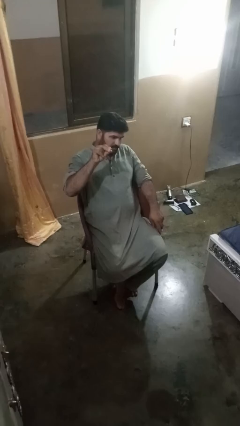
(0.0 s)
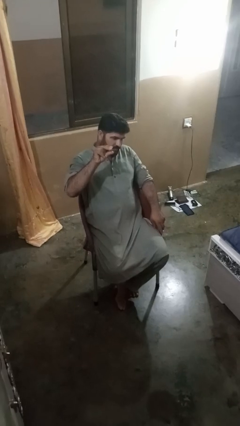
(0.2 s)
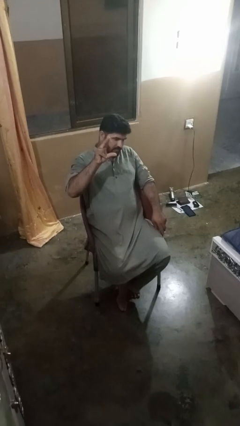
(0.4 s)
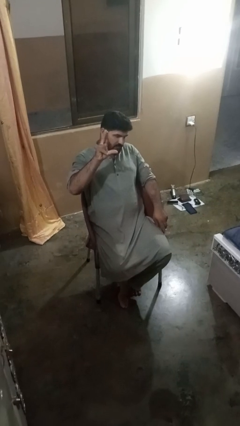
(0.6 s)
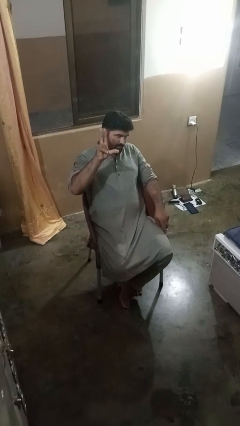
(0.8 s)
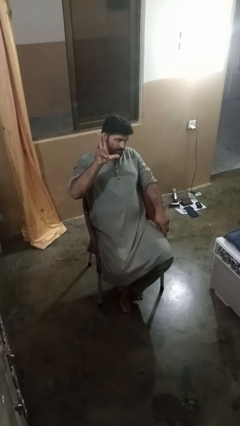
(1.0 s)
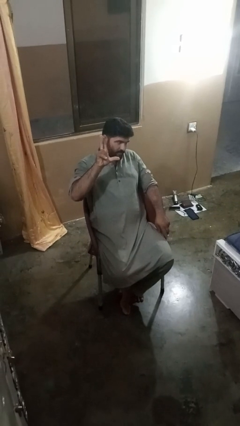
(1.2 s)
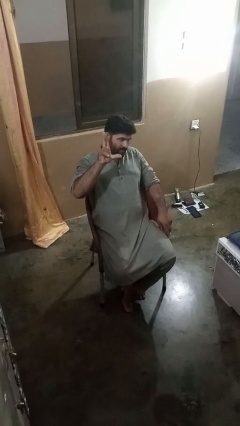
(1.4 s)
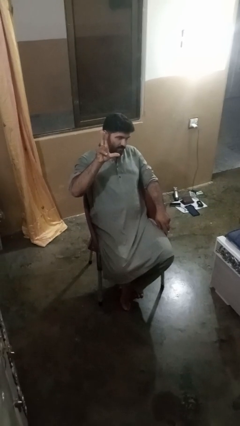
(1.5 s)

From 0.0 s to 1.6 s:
person gestures zoom out

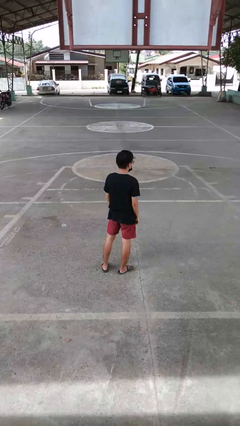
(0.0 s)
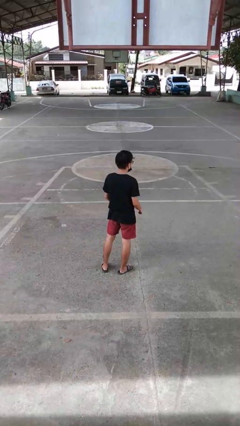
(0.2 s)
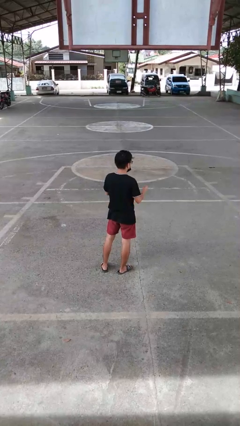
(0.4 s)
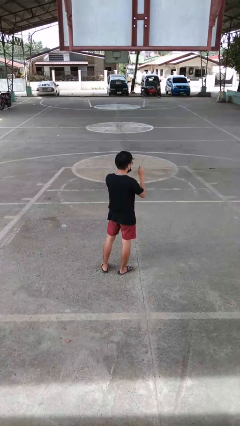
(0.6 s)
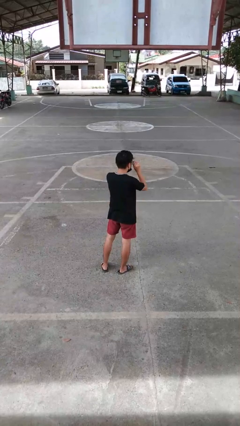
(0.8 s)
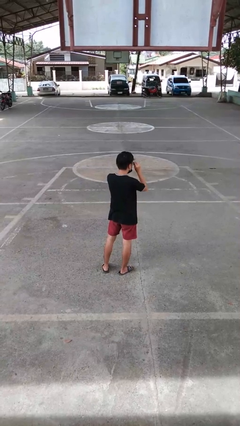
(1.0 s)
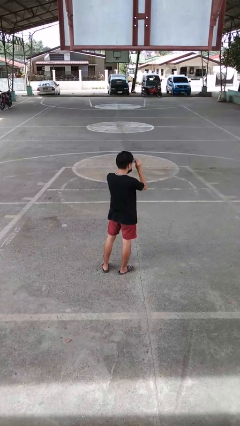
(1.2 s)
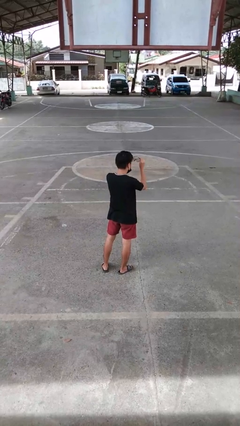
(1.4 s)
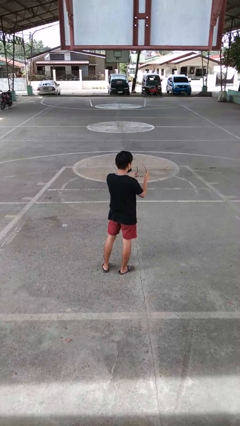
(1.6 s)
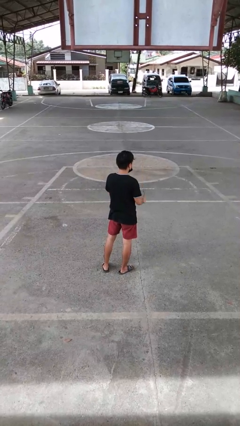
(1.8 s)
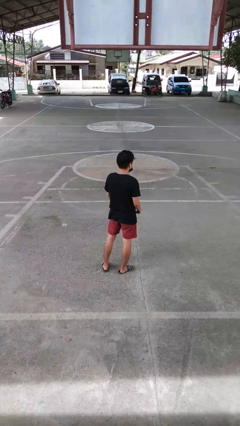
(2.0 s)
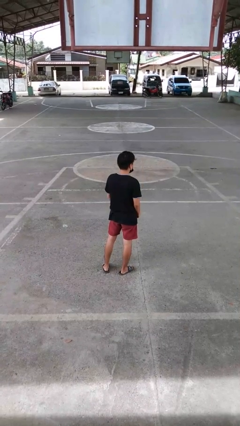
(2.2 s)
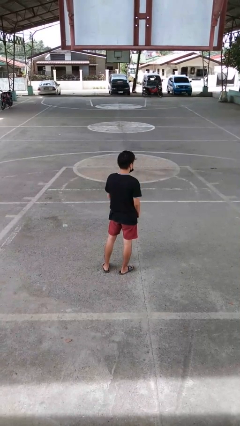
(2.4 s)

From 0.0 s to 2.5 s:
person takes off glasses

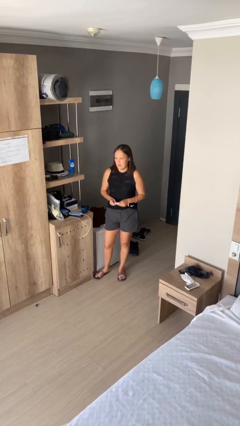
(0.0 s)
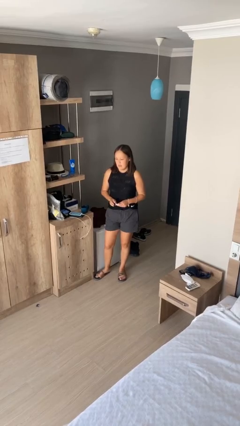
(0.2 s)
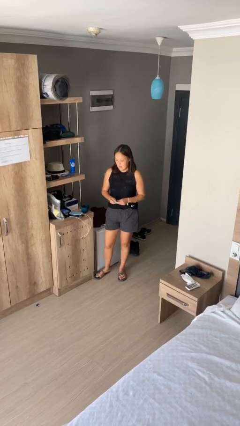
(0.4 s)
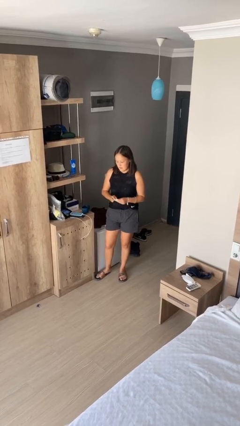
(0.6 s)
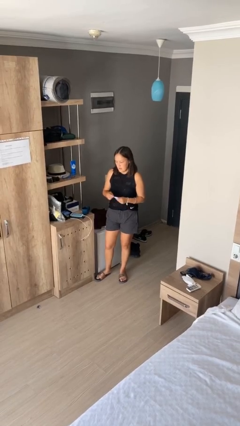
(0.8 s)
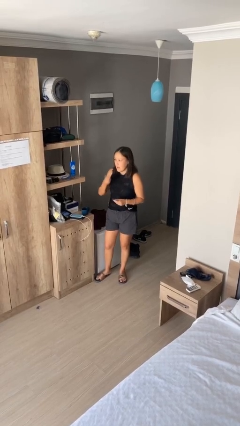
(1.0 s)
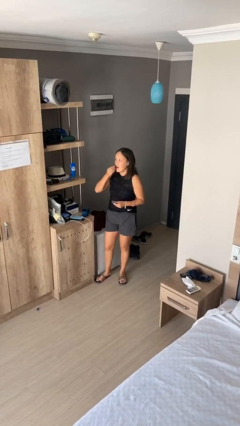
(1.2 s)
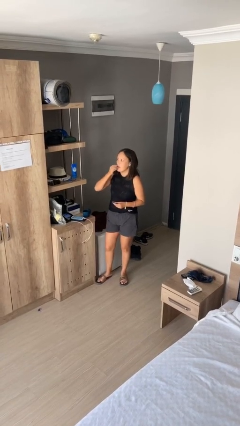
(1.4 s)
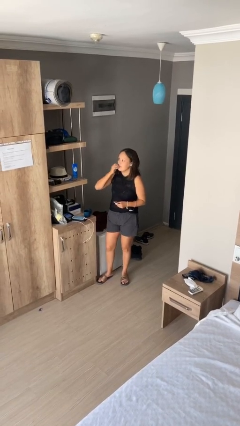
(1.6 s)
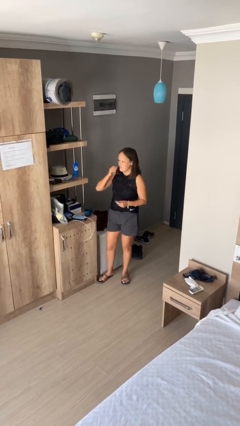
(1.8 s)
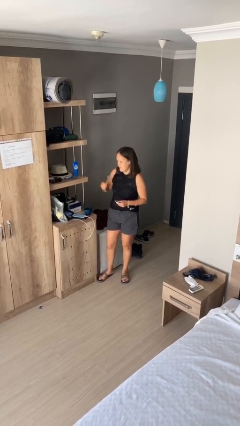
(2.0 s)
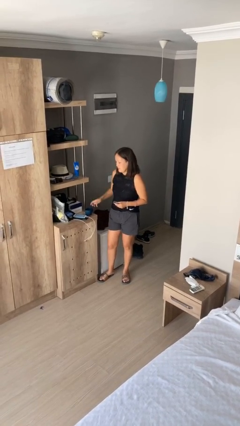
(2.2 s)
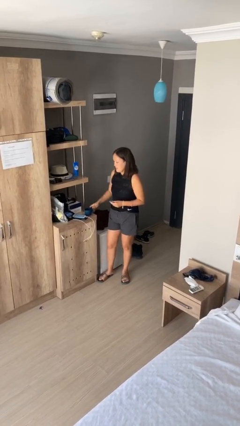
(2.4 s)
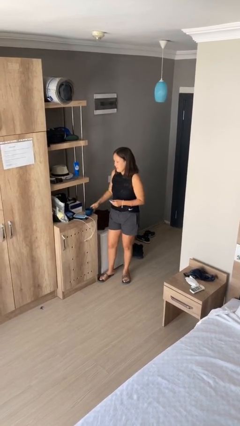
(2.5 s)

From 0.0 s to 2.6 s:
person takes medicine pills

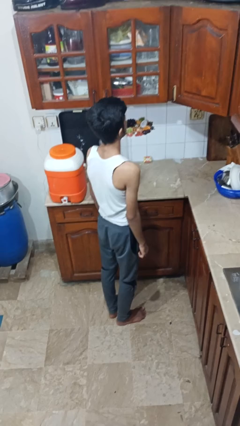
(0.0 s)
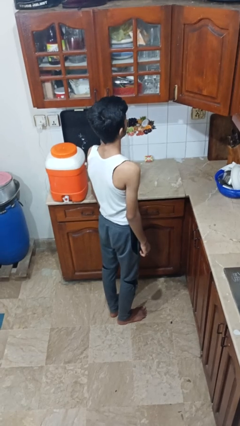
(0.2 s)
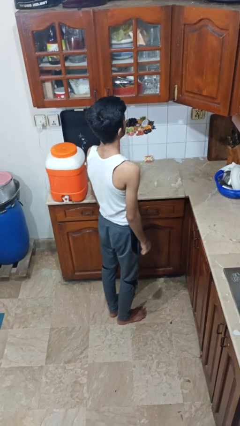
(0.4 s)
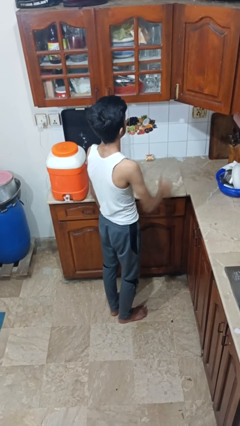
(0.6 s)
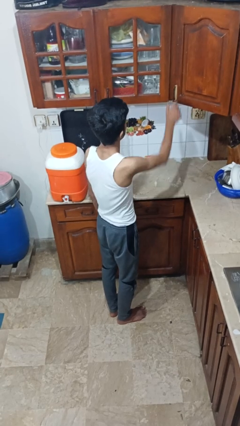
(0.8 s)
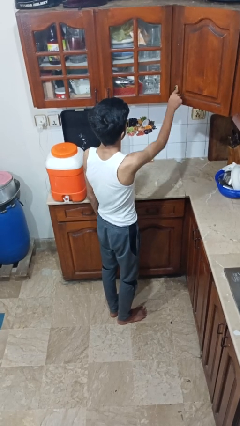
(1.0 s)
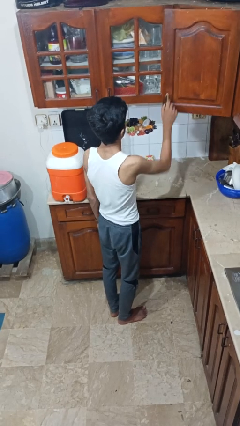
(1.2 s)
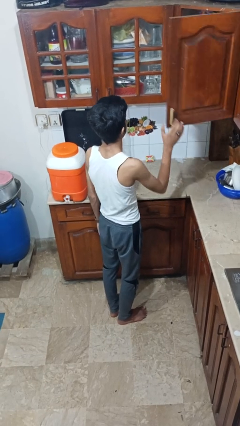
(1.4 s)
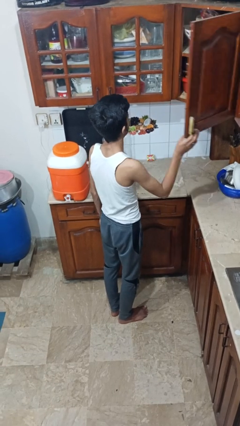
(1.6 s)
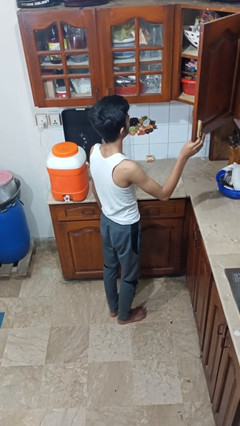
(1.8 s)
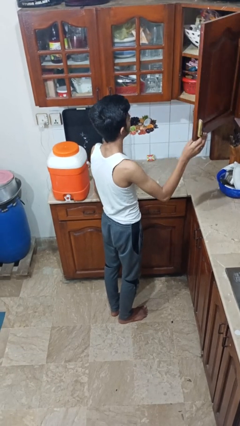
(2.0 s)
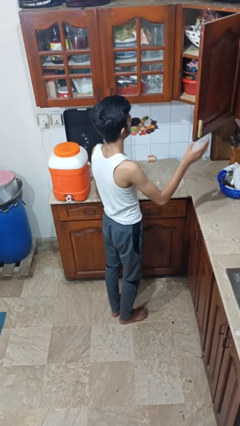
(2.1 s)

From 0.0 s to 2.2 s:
person closes cabinet

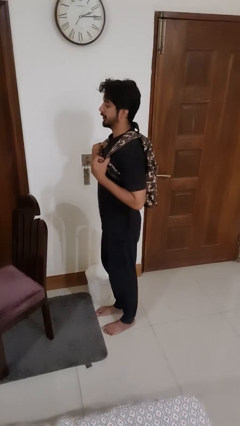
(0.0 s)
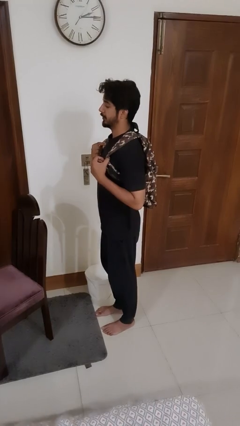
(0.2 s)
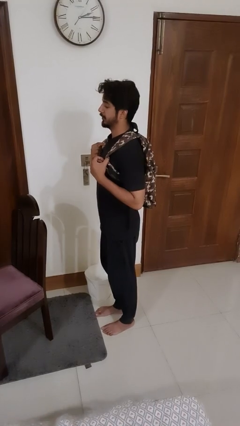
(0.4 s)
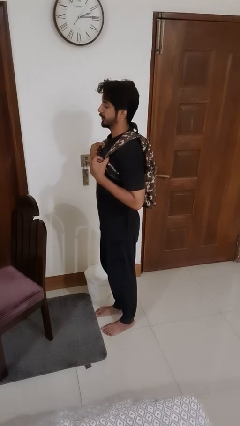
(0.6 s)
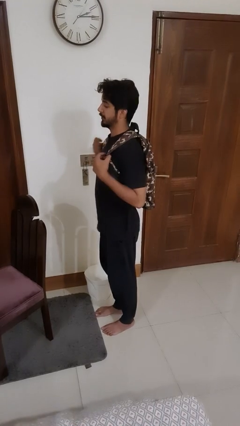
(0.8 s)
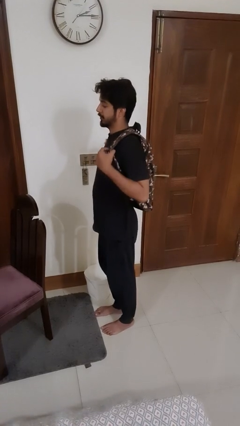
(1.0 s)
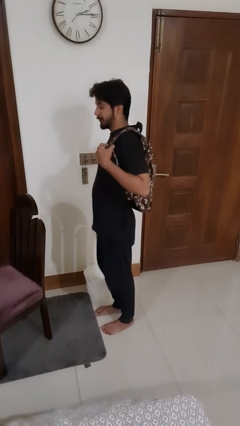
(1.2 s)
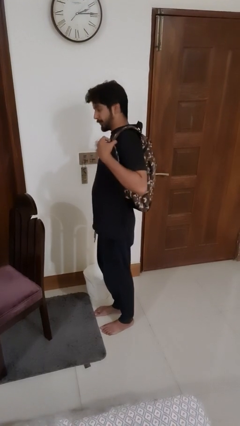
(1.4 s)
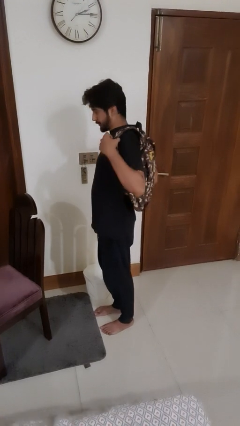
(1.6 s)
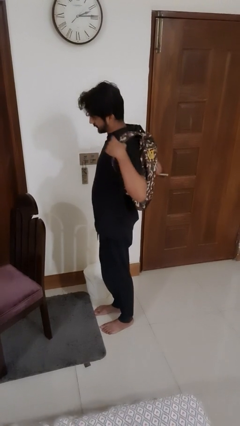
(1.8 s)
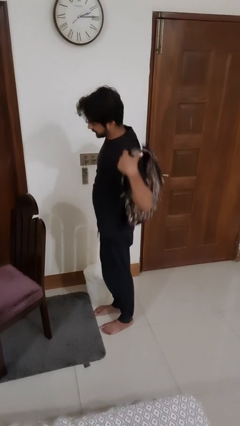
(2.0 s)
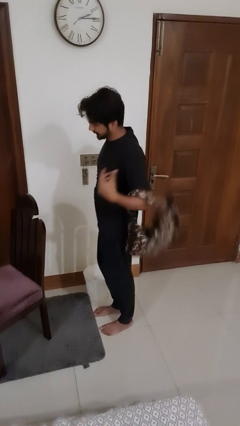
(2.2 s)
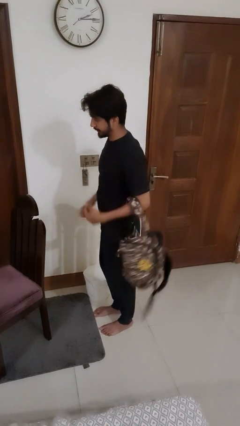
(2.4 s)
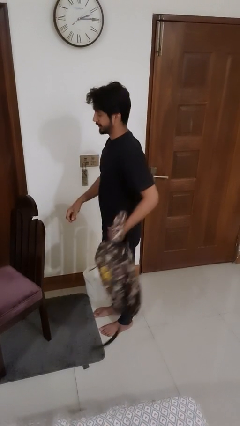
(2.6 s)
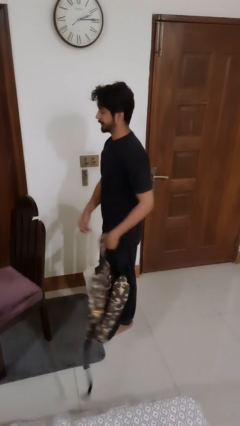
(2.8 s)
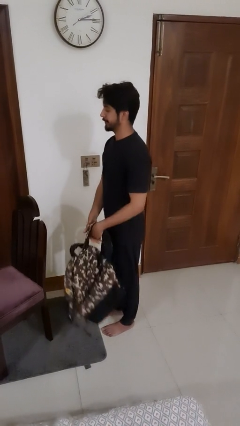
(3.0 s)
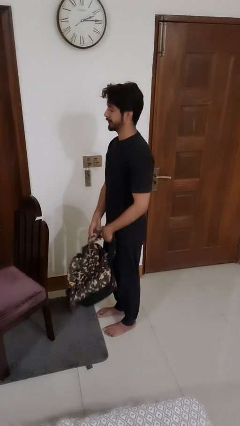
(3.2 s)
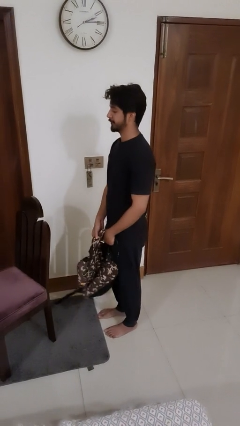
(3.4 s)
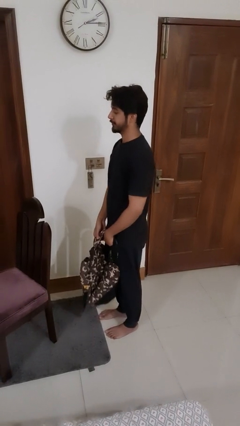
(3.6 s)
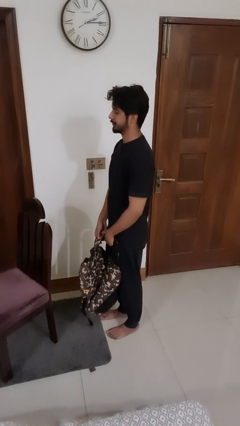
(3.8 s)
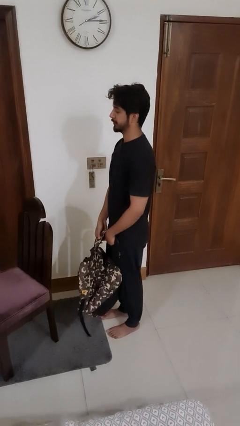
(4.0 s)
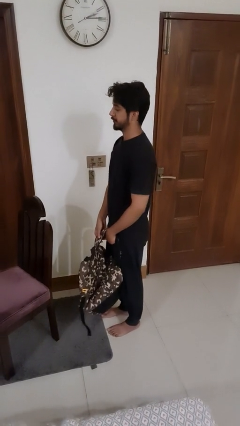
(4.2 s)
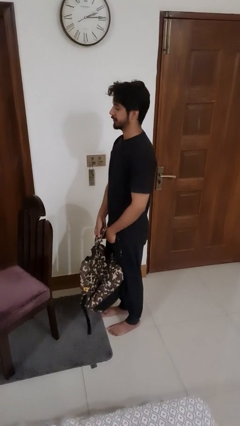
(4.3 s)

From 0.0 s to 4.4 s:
person takes off backpack

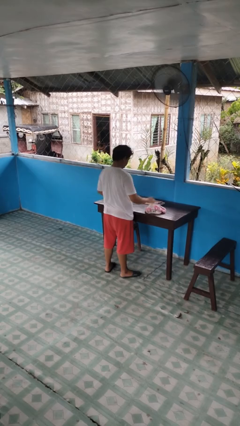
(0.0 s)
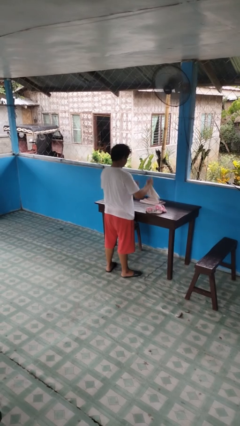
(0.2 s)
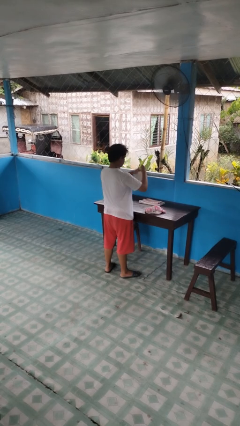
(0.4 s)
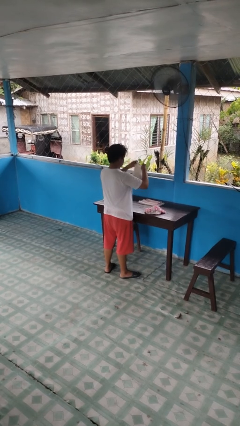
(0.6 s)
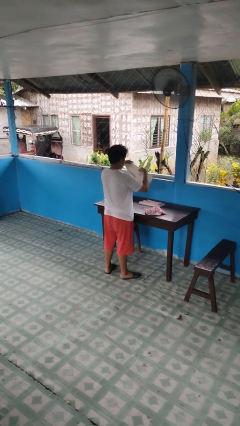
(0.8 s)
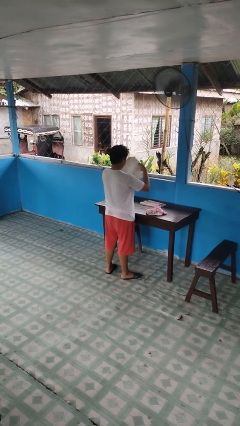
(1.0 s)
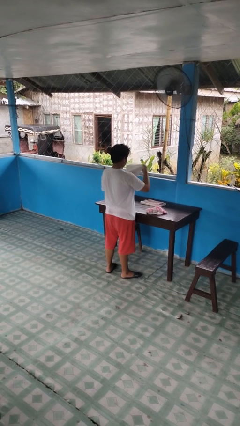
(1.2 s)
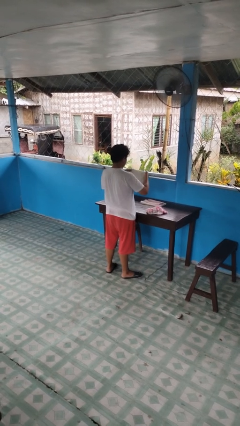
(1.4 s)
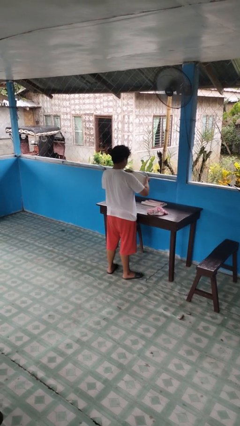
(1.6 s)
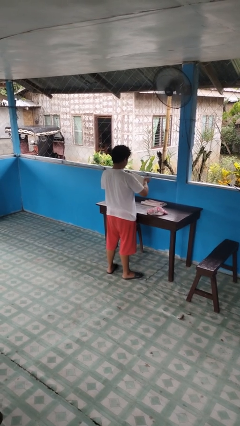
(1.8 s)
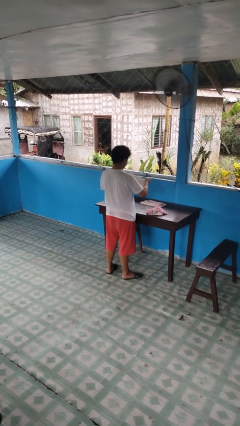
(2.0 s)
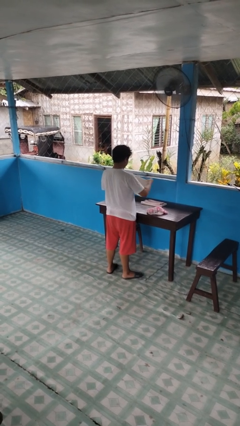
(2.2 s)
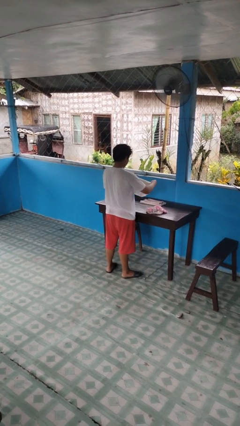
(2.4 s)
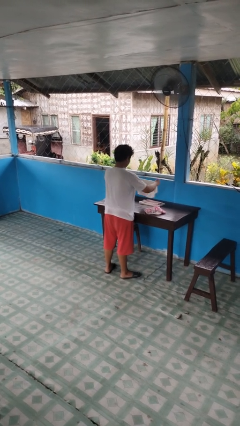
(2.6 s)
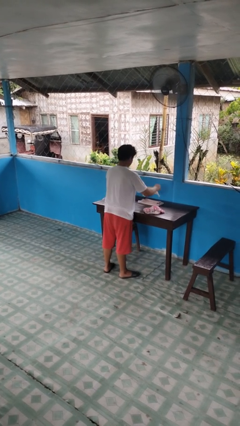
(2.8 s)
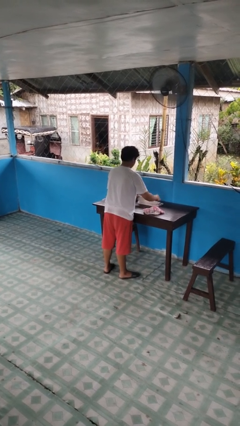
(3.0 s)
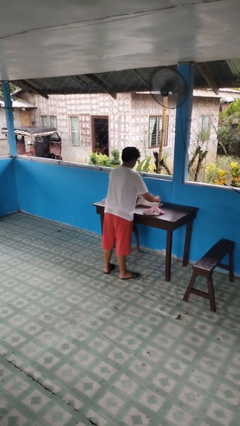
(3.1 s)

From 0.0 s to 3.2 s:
person folds towel

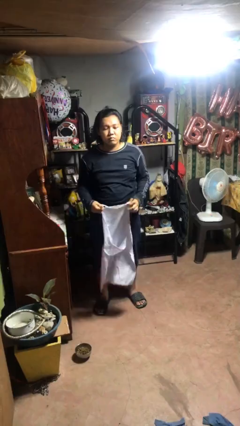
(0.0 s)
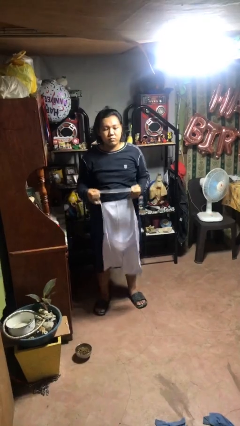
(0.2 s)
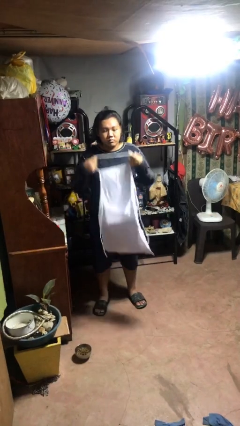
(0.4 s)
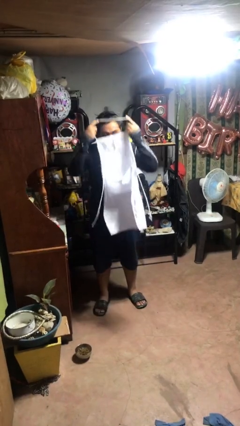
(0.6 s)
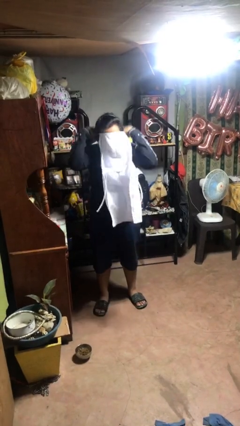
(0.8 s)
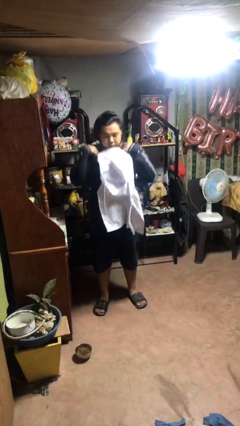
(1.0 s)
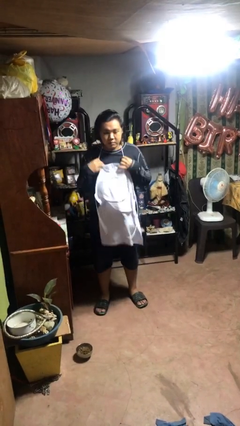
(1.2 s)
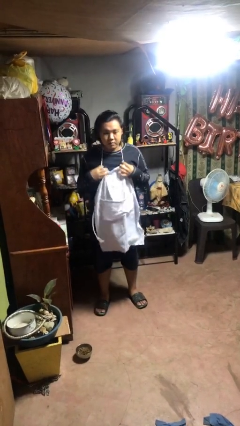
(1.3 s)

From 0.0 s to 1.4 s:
person puts on apron
